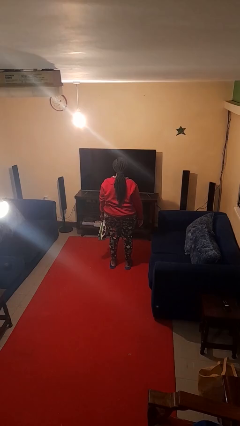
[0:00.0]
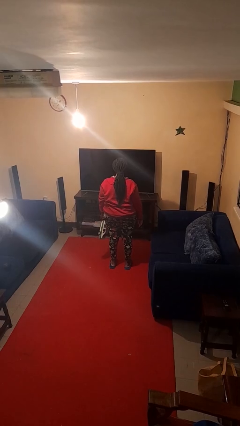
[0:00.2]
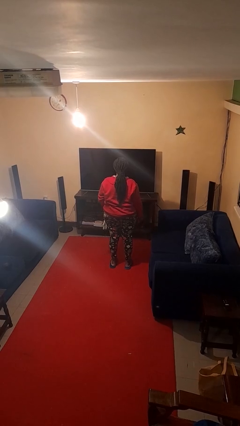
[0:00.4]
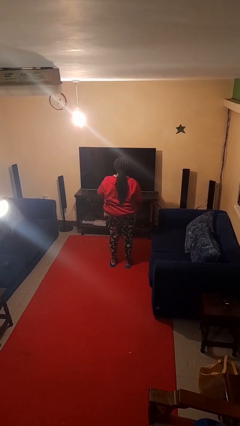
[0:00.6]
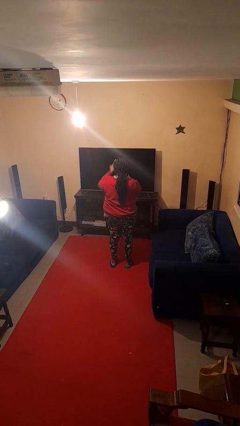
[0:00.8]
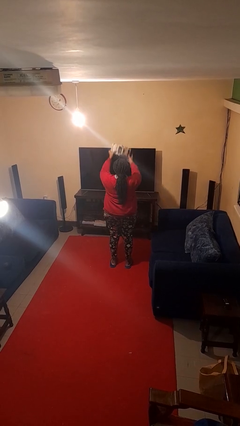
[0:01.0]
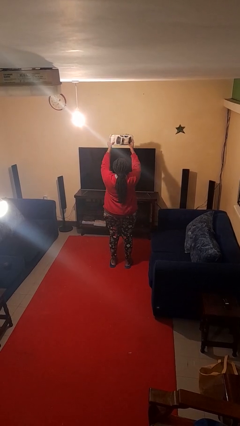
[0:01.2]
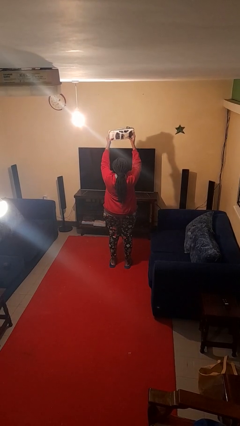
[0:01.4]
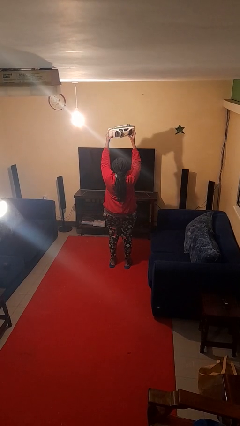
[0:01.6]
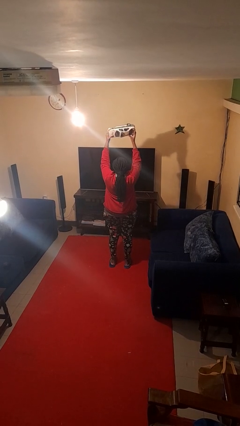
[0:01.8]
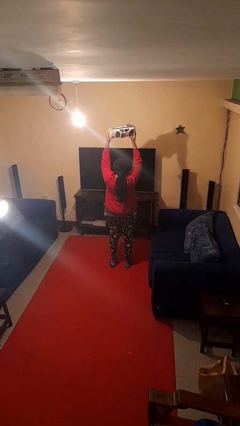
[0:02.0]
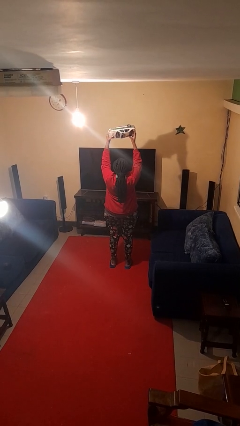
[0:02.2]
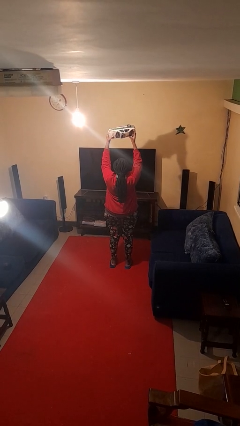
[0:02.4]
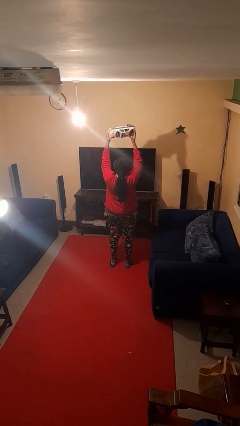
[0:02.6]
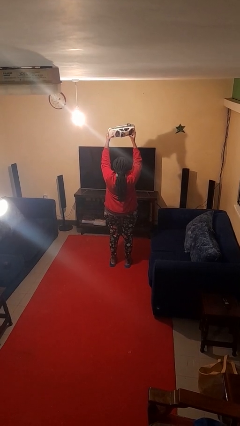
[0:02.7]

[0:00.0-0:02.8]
person holds object above head

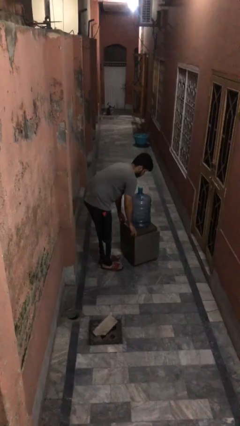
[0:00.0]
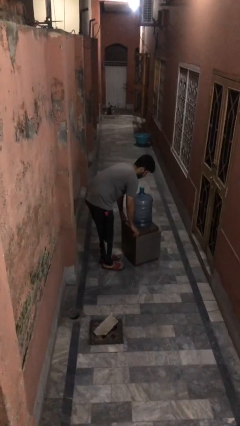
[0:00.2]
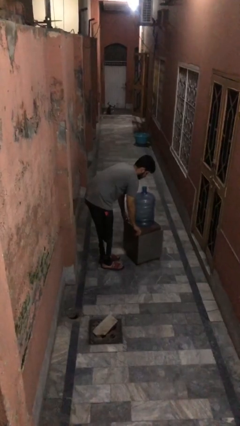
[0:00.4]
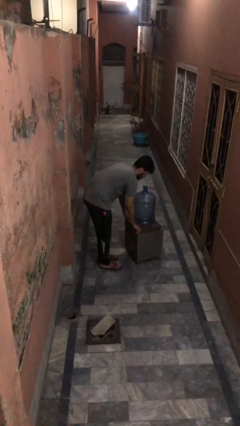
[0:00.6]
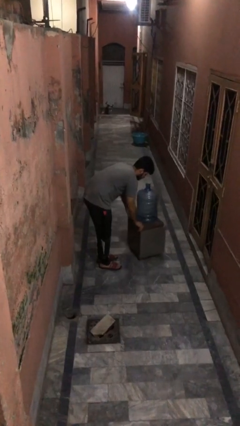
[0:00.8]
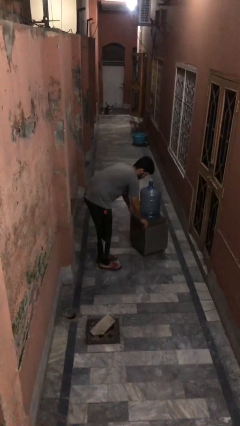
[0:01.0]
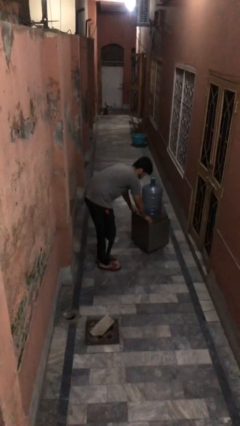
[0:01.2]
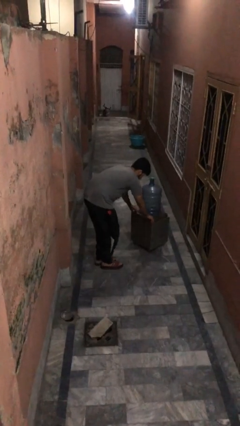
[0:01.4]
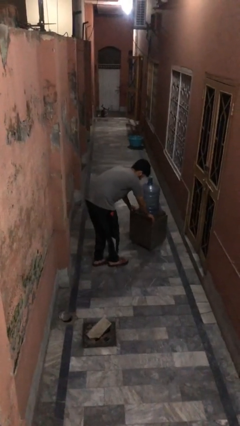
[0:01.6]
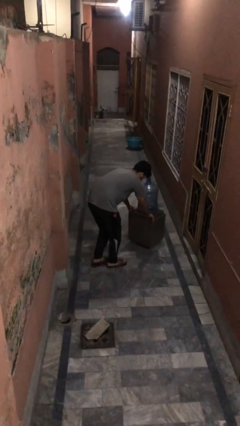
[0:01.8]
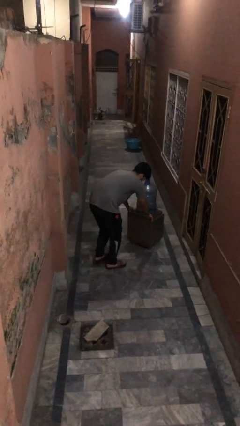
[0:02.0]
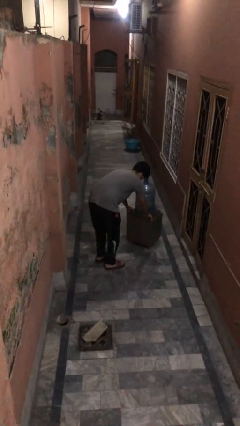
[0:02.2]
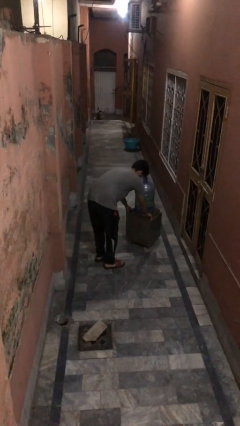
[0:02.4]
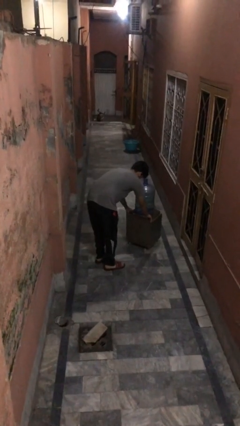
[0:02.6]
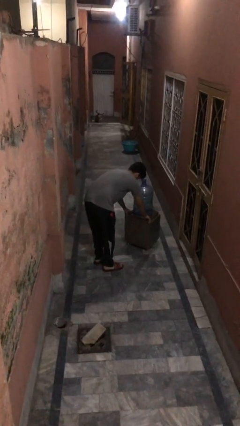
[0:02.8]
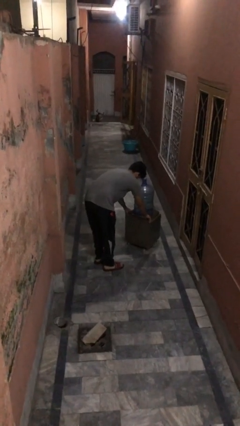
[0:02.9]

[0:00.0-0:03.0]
person pushes wheeled cart

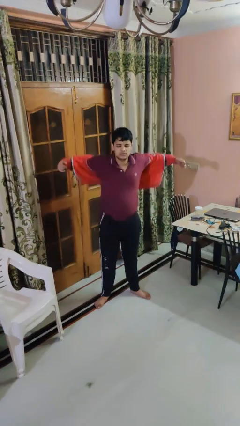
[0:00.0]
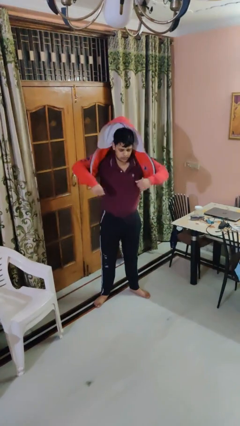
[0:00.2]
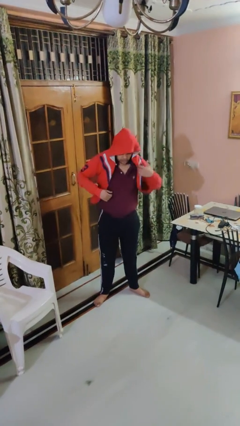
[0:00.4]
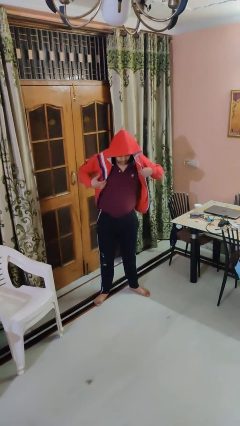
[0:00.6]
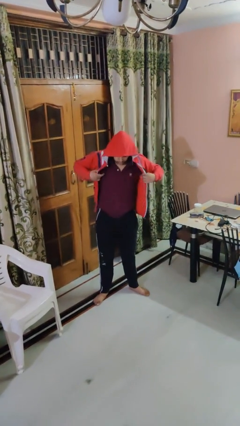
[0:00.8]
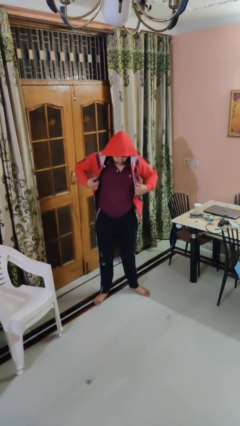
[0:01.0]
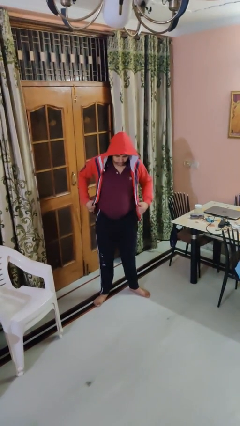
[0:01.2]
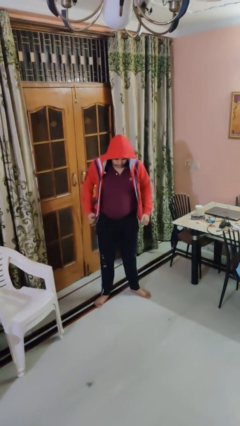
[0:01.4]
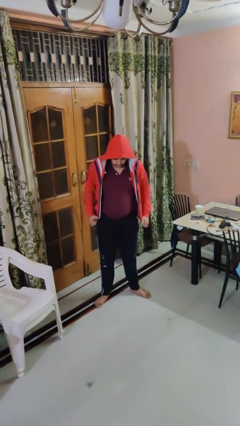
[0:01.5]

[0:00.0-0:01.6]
person puts on hoodie

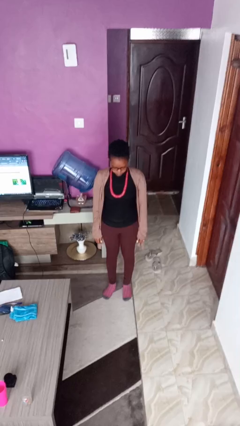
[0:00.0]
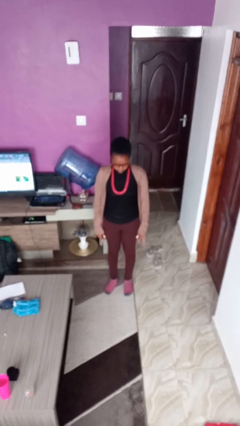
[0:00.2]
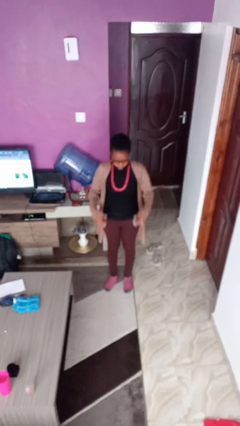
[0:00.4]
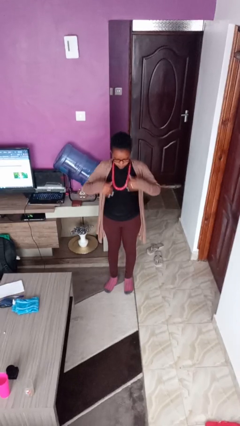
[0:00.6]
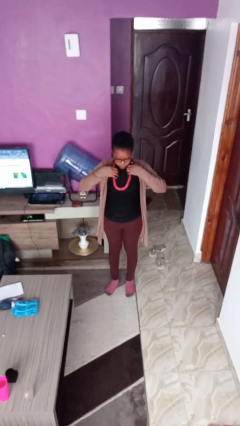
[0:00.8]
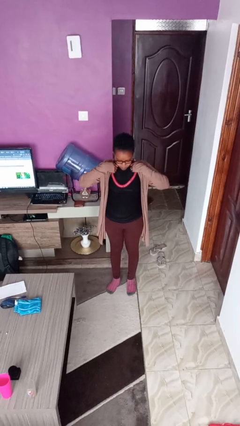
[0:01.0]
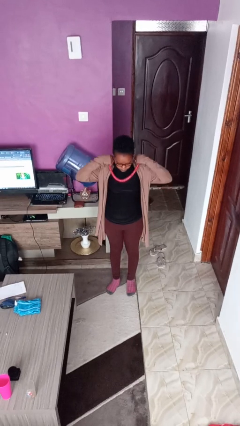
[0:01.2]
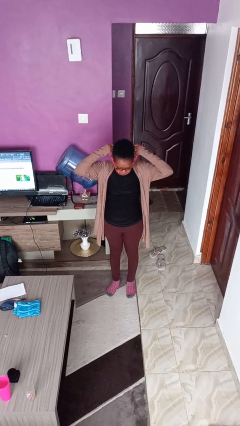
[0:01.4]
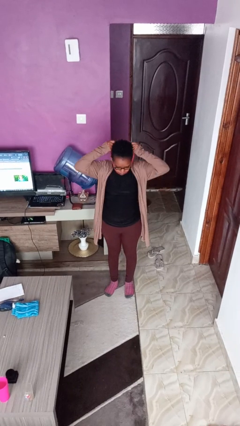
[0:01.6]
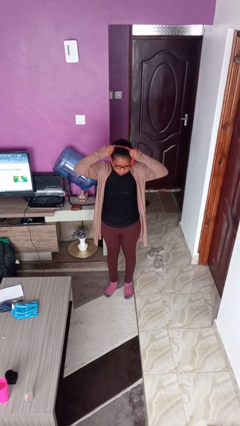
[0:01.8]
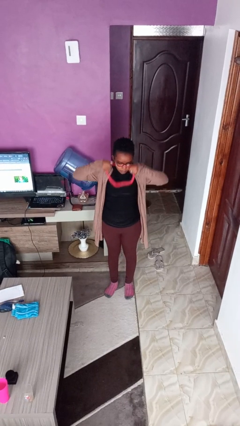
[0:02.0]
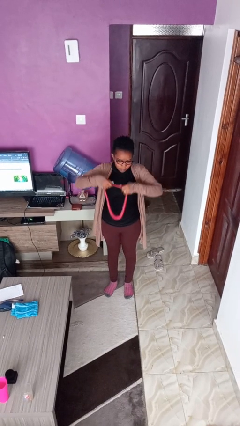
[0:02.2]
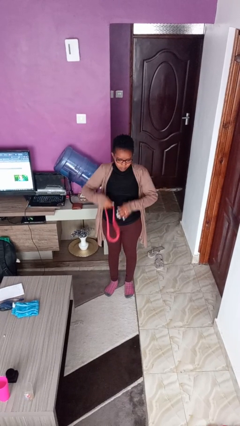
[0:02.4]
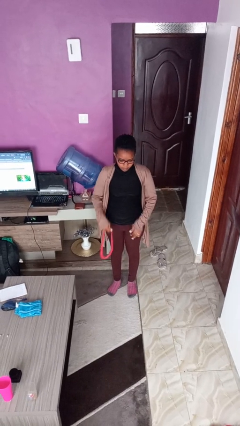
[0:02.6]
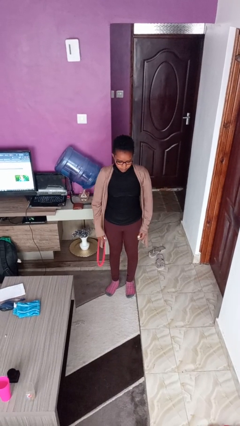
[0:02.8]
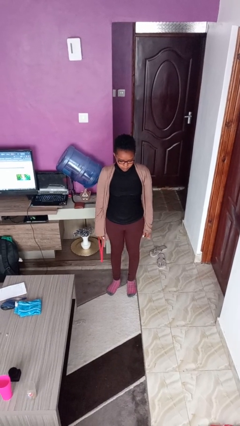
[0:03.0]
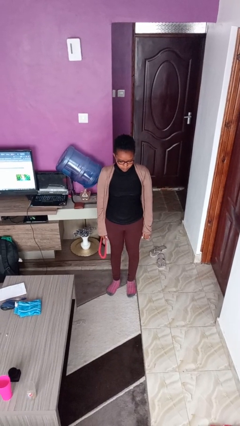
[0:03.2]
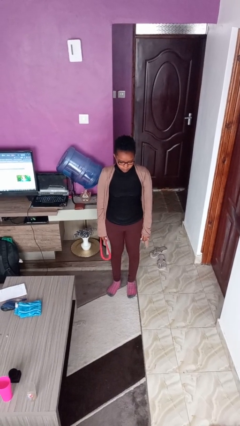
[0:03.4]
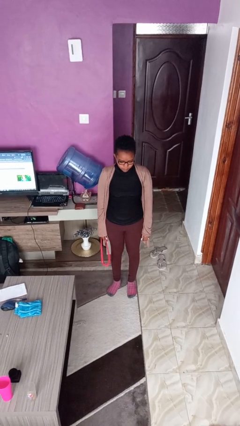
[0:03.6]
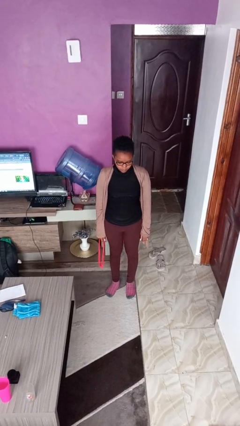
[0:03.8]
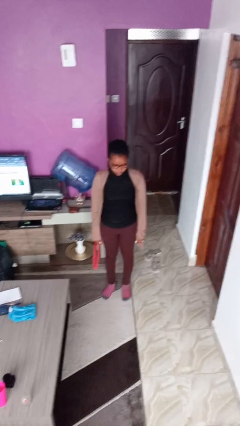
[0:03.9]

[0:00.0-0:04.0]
person takes off necklace

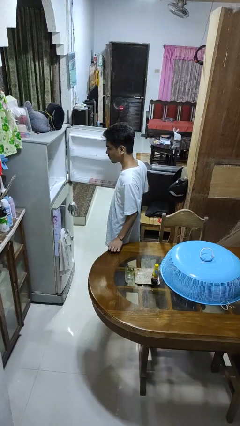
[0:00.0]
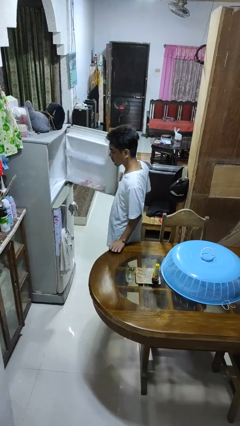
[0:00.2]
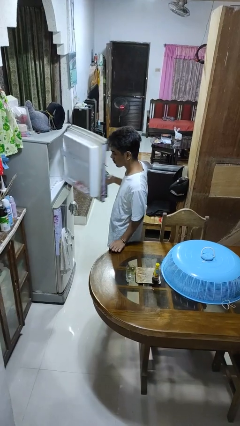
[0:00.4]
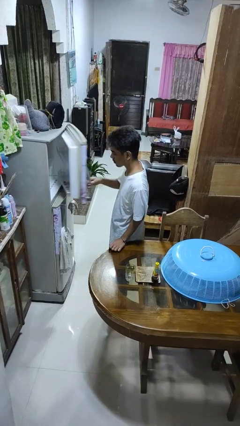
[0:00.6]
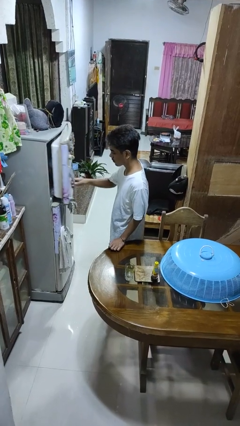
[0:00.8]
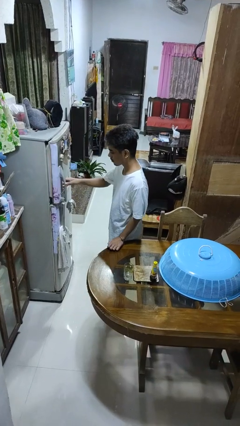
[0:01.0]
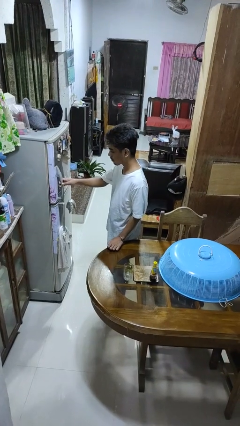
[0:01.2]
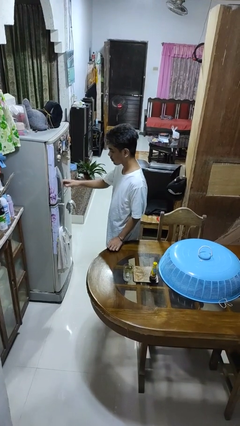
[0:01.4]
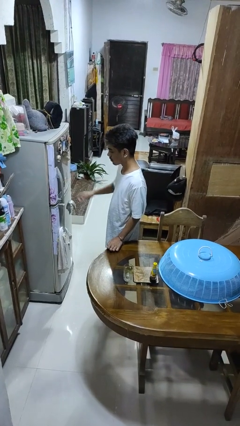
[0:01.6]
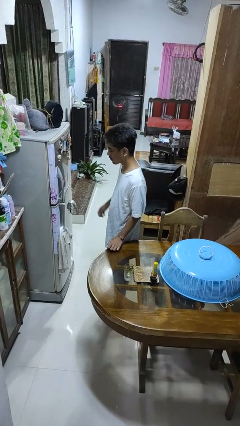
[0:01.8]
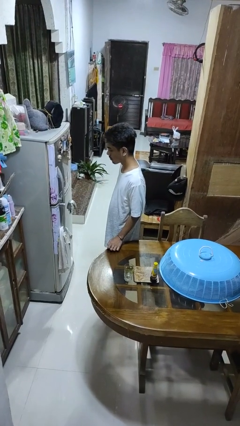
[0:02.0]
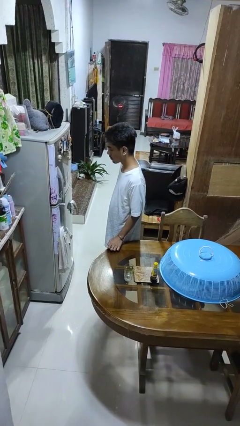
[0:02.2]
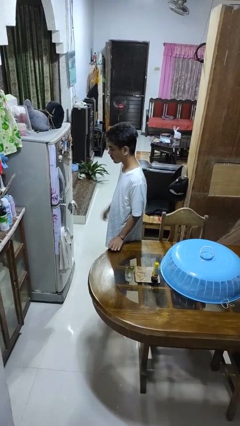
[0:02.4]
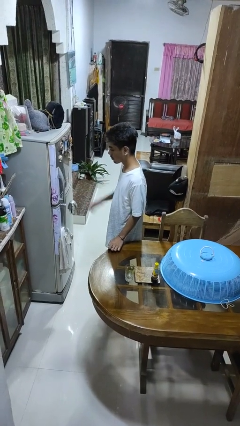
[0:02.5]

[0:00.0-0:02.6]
person closes refrigerator

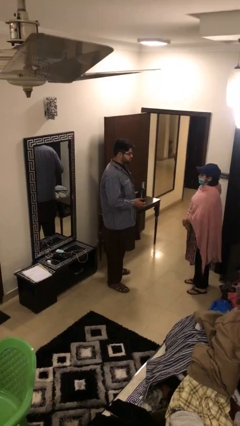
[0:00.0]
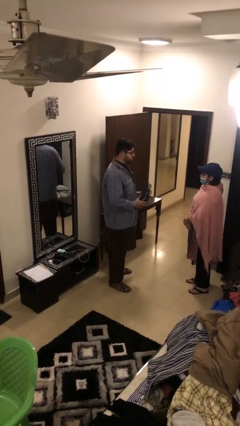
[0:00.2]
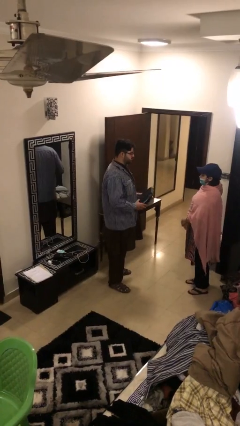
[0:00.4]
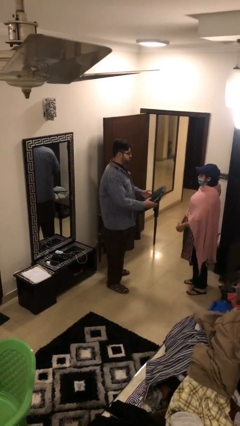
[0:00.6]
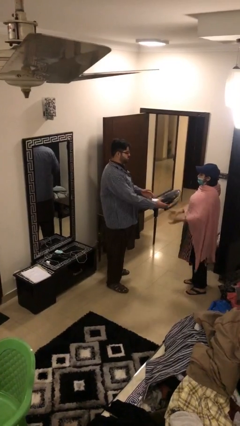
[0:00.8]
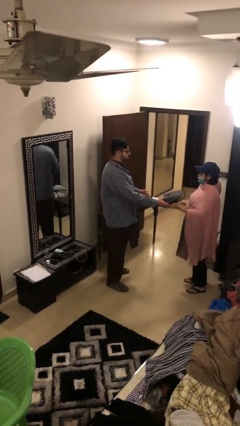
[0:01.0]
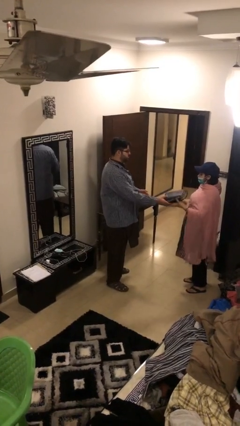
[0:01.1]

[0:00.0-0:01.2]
person transfers object to person

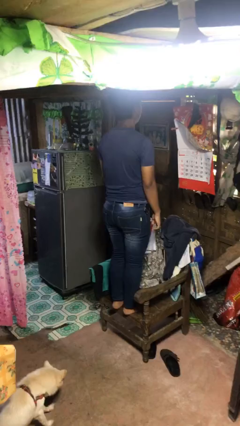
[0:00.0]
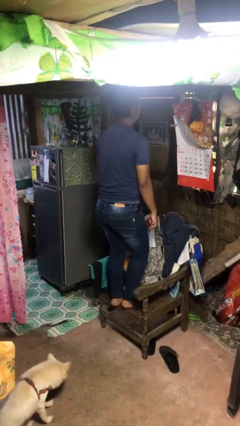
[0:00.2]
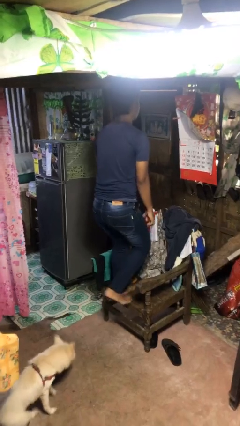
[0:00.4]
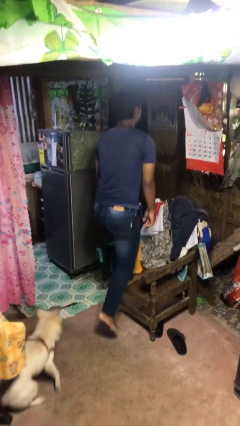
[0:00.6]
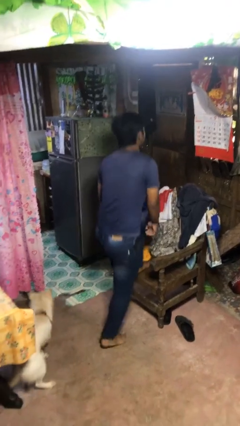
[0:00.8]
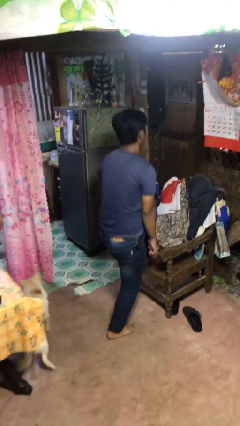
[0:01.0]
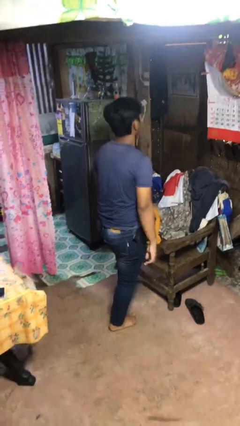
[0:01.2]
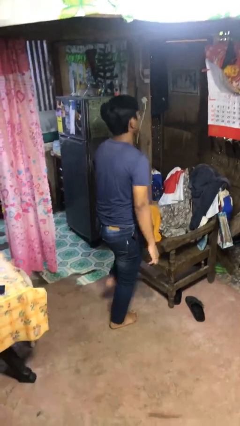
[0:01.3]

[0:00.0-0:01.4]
person climbs off chair

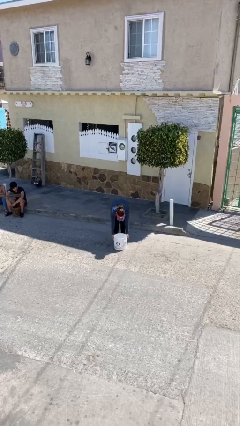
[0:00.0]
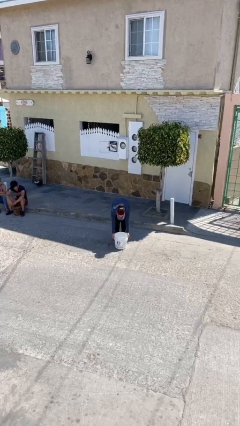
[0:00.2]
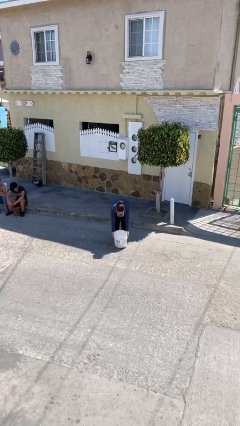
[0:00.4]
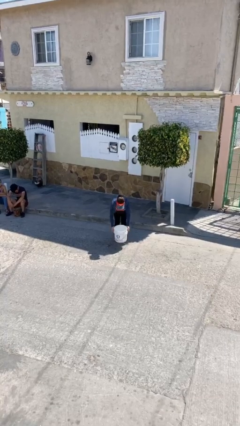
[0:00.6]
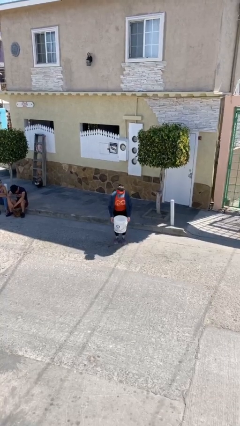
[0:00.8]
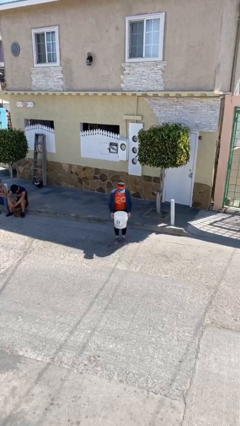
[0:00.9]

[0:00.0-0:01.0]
person picks up object from floor
